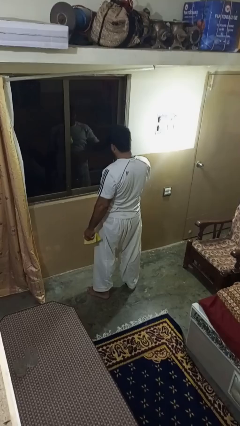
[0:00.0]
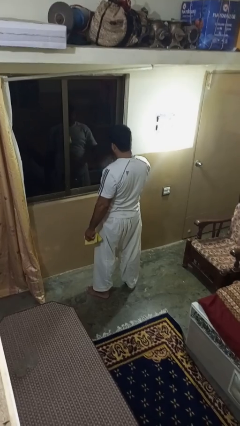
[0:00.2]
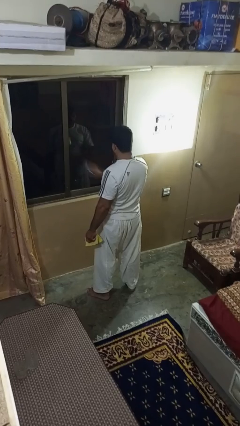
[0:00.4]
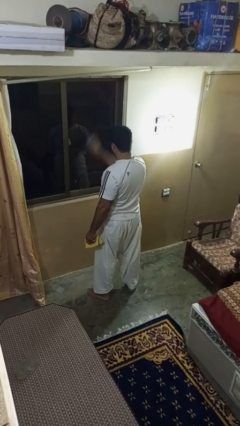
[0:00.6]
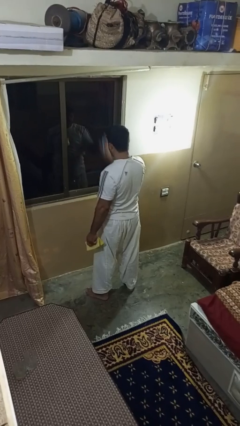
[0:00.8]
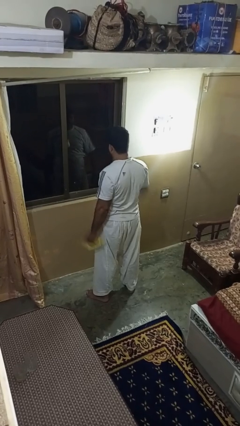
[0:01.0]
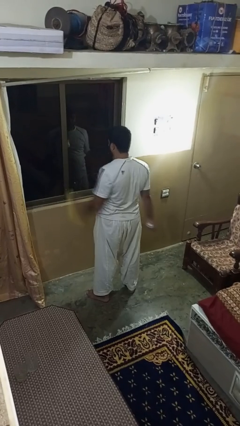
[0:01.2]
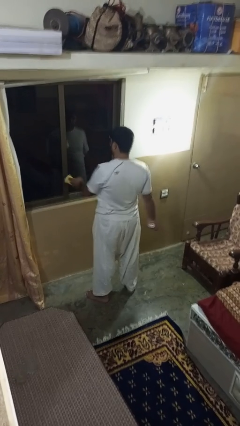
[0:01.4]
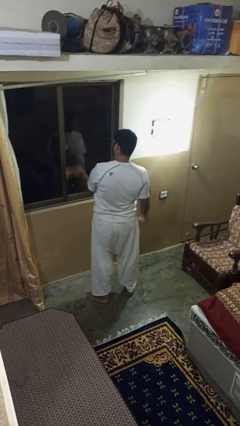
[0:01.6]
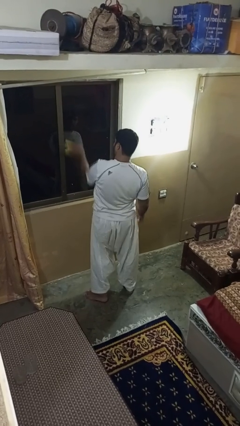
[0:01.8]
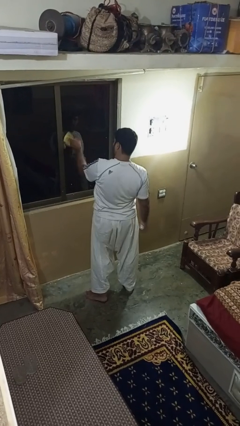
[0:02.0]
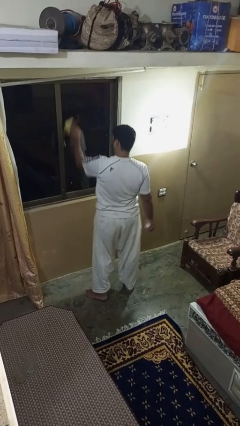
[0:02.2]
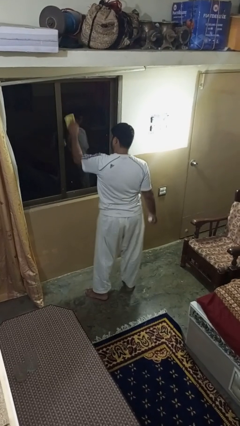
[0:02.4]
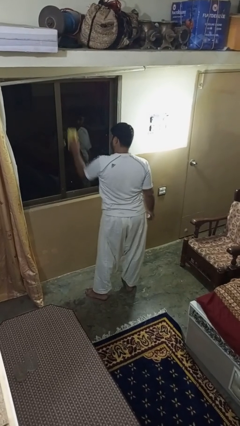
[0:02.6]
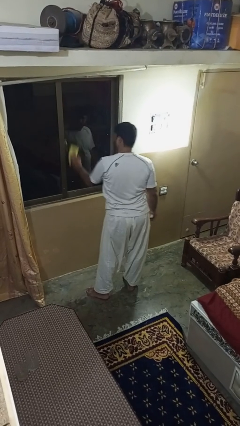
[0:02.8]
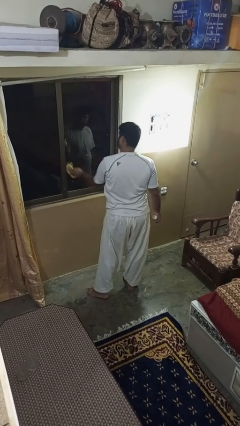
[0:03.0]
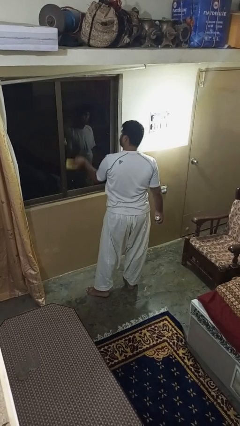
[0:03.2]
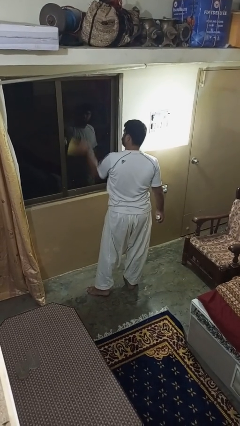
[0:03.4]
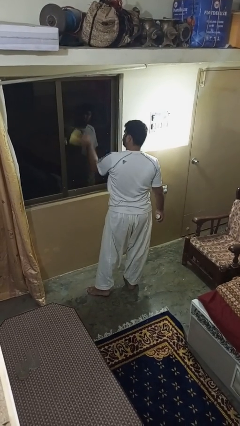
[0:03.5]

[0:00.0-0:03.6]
person washes window

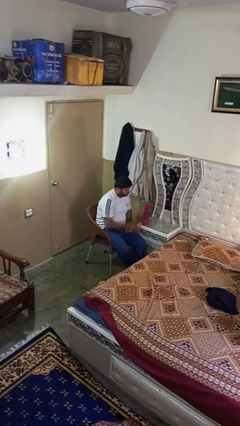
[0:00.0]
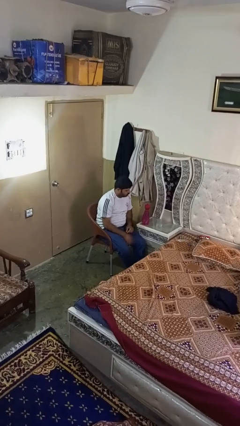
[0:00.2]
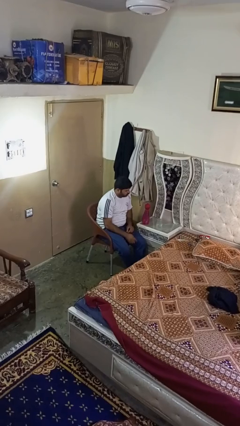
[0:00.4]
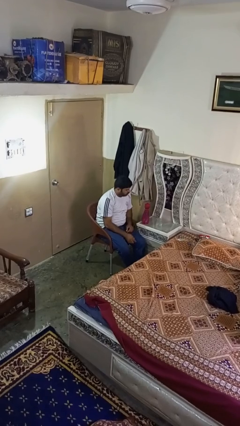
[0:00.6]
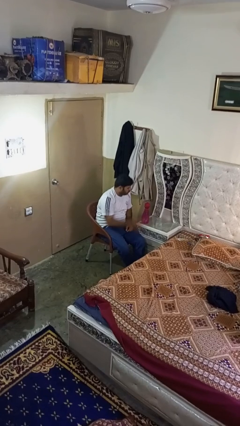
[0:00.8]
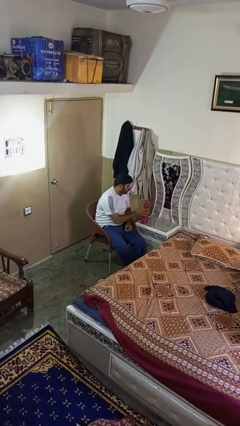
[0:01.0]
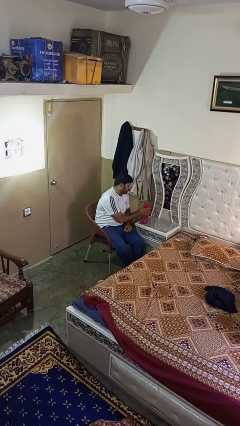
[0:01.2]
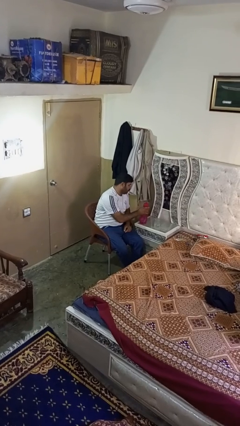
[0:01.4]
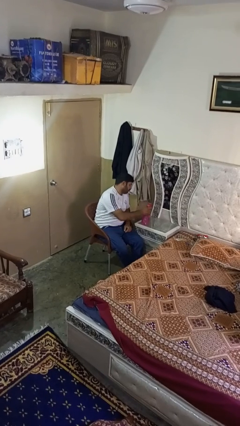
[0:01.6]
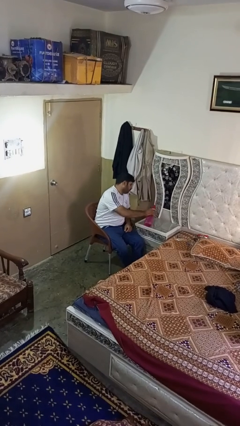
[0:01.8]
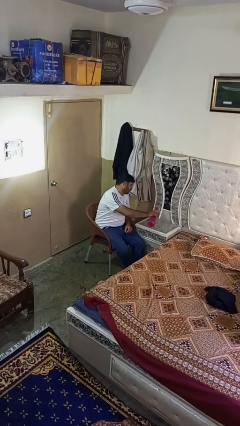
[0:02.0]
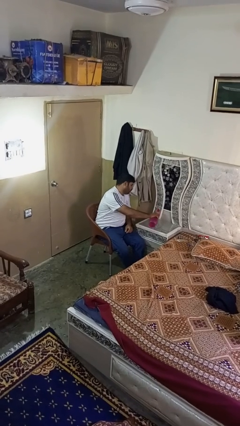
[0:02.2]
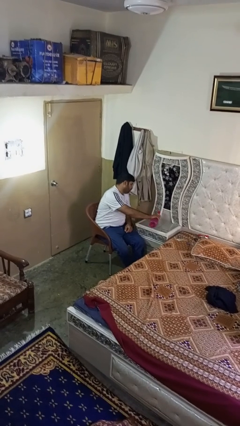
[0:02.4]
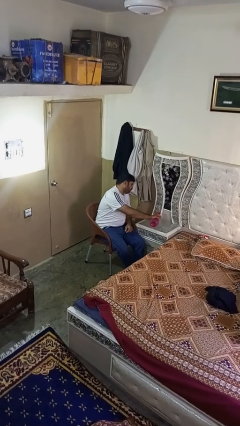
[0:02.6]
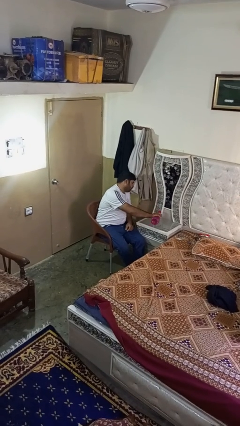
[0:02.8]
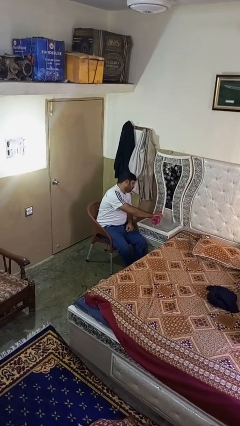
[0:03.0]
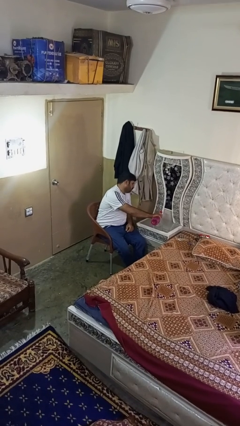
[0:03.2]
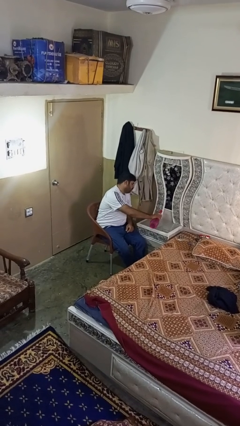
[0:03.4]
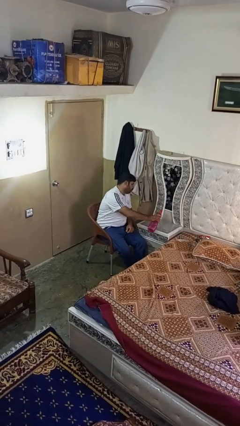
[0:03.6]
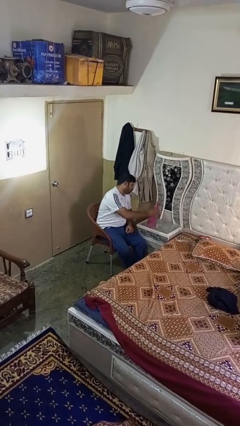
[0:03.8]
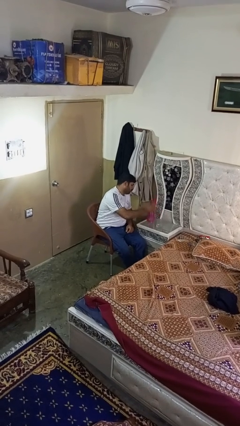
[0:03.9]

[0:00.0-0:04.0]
person pours liquid into cup

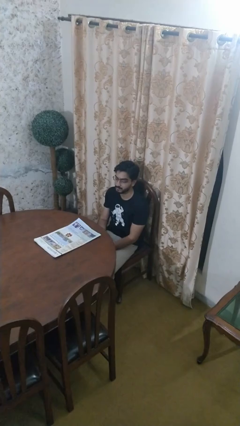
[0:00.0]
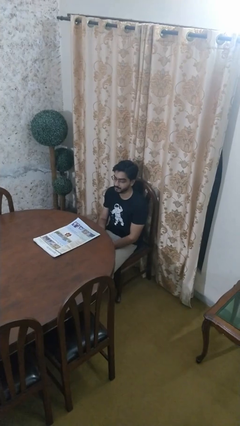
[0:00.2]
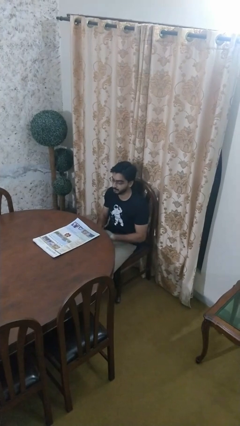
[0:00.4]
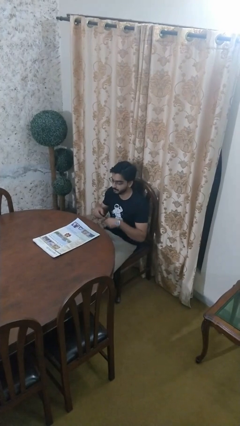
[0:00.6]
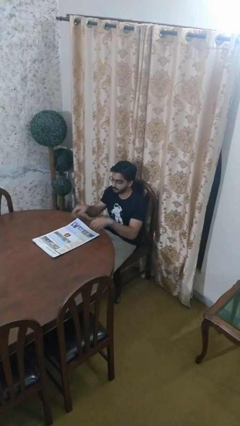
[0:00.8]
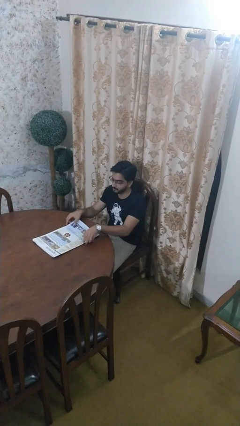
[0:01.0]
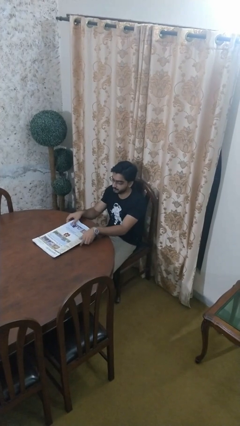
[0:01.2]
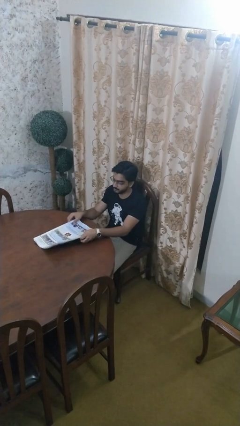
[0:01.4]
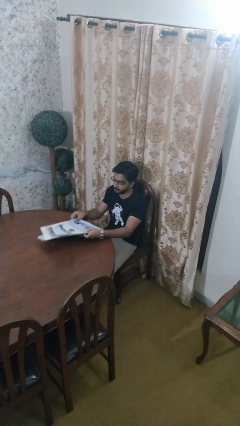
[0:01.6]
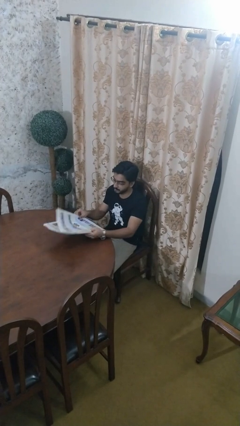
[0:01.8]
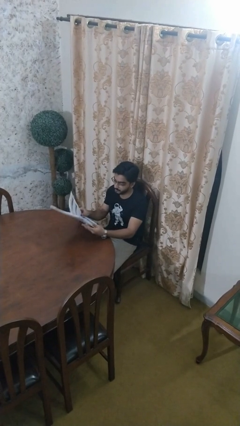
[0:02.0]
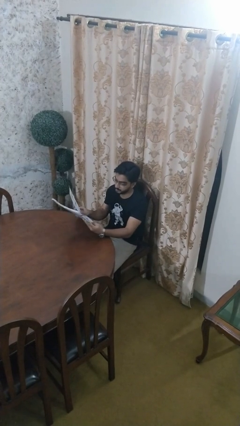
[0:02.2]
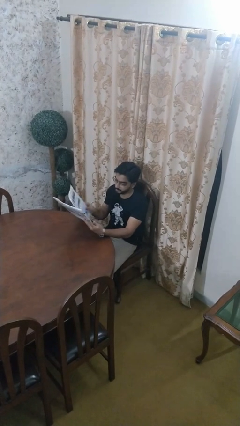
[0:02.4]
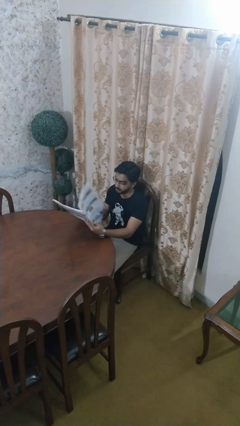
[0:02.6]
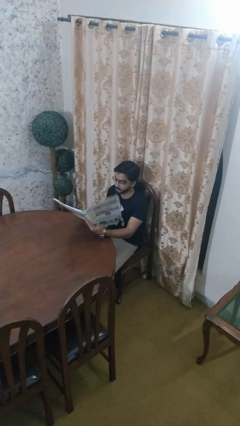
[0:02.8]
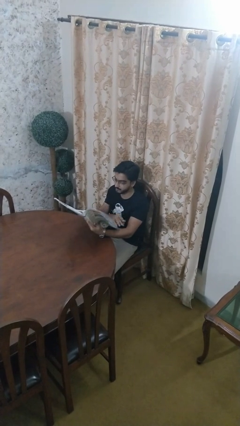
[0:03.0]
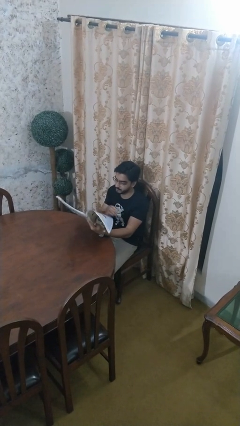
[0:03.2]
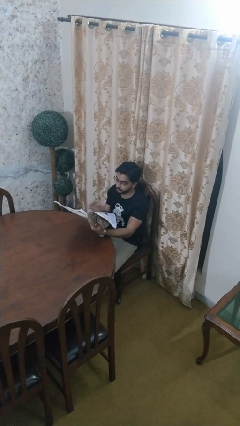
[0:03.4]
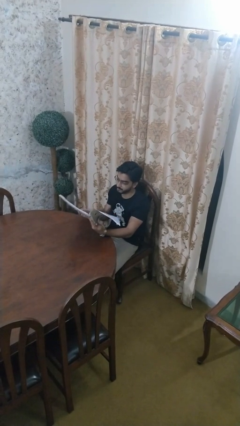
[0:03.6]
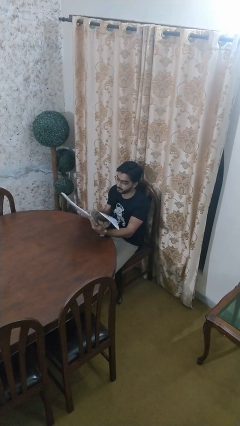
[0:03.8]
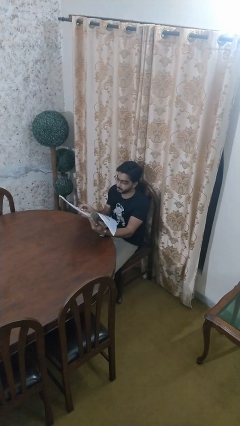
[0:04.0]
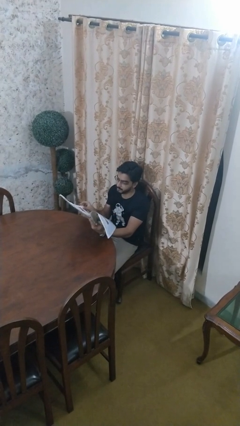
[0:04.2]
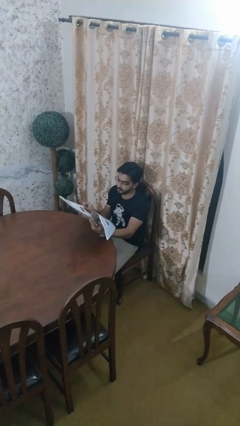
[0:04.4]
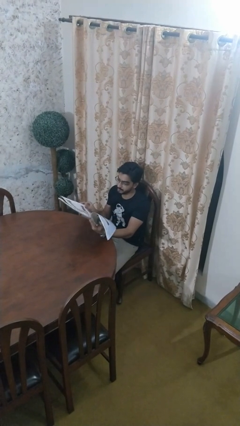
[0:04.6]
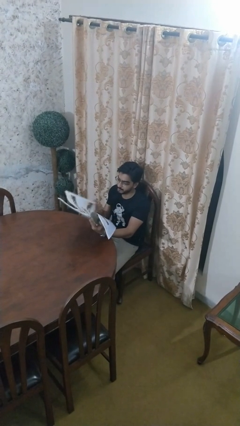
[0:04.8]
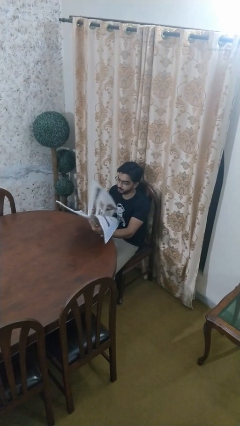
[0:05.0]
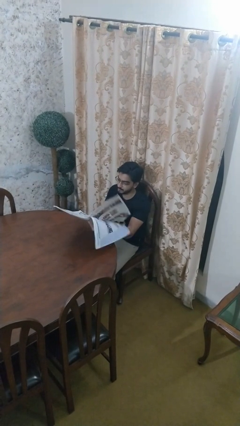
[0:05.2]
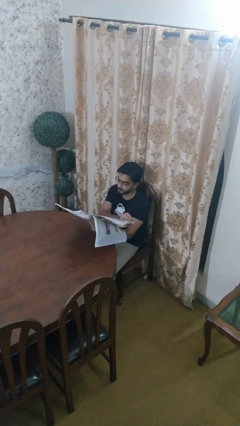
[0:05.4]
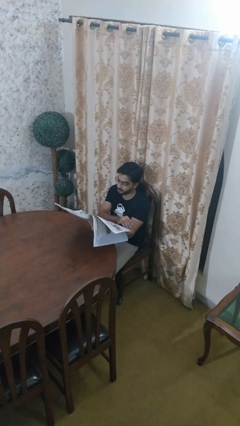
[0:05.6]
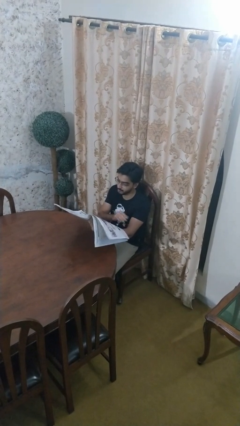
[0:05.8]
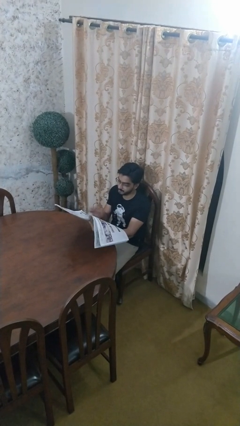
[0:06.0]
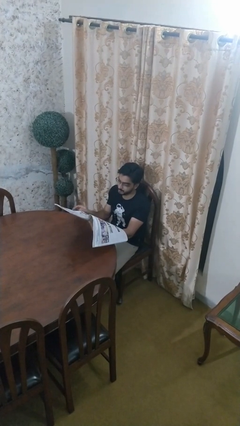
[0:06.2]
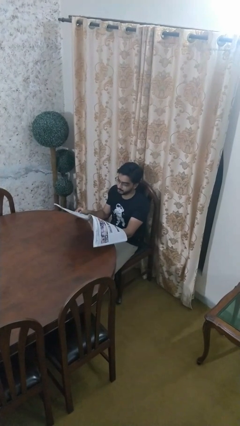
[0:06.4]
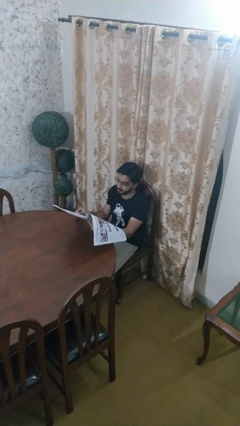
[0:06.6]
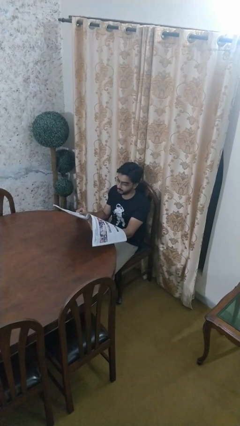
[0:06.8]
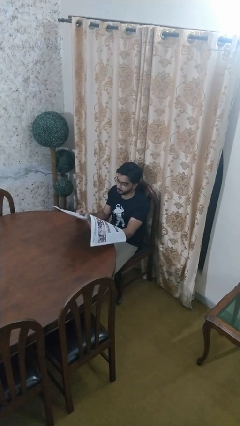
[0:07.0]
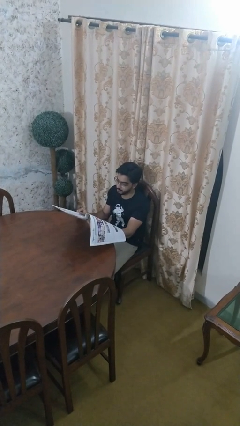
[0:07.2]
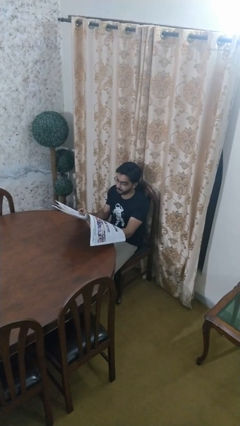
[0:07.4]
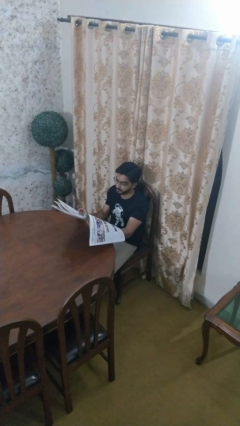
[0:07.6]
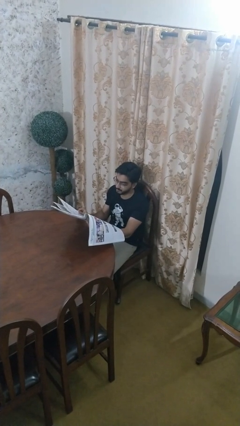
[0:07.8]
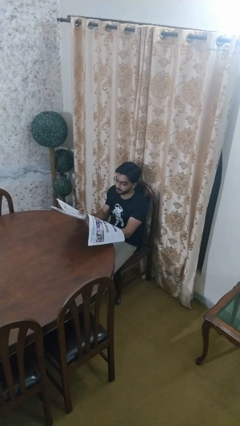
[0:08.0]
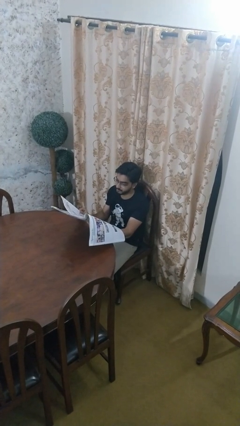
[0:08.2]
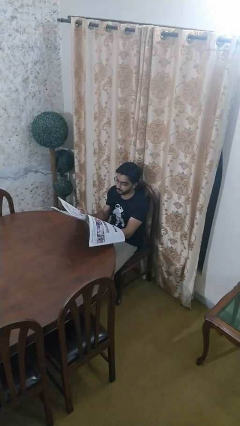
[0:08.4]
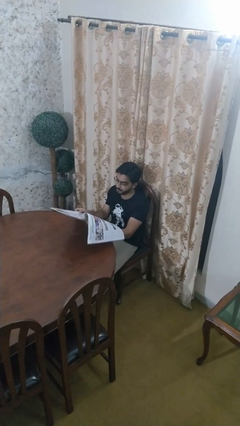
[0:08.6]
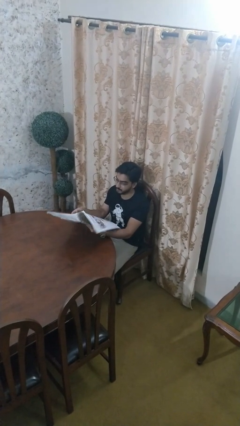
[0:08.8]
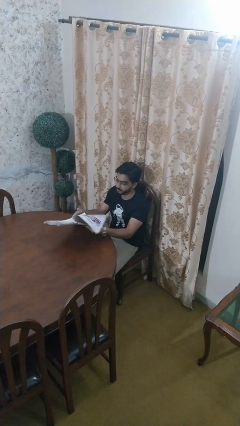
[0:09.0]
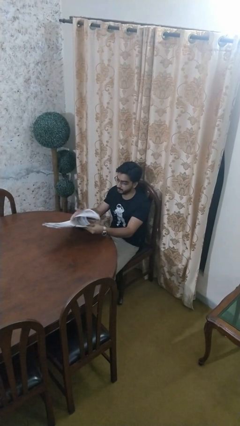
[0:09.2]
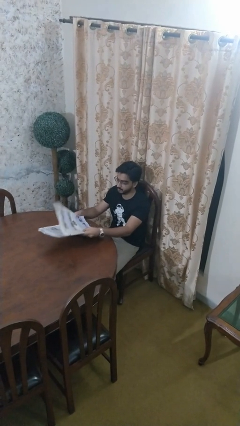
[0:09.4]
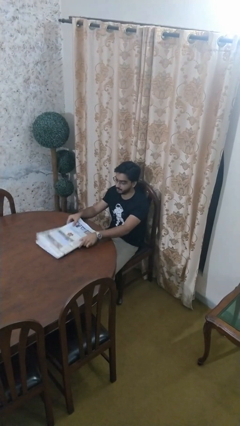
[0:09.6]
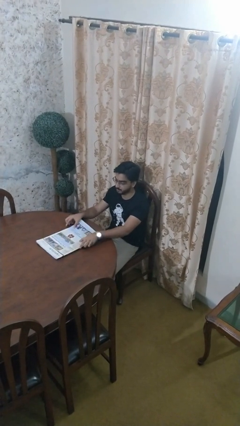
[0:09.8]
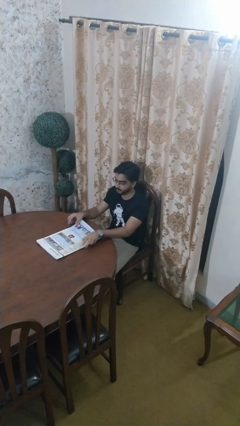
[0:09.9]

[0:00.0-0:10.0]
person reads magazine

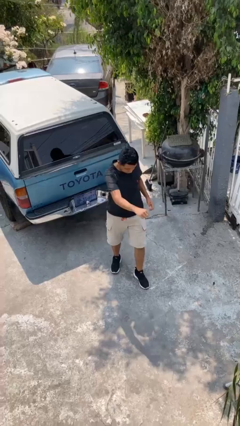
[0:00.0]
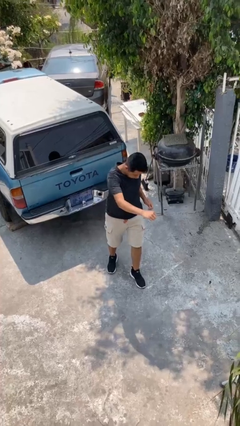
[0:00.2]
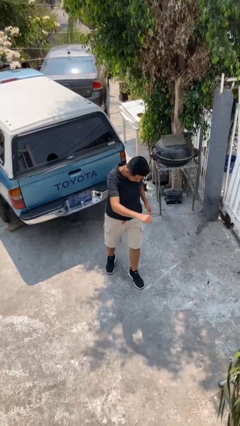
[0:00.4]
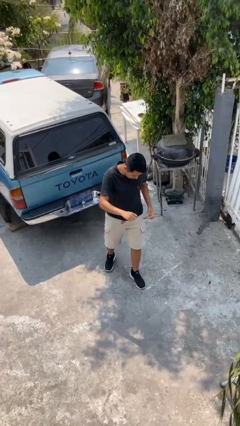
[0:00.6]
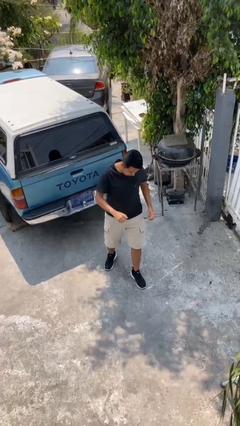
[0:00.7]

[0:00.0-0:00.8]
person karate chop
